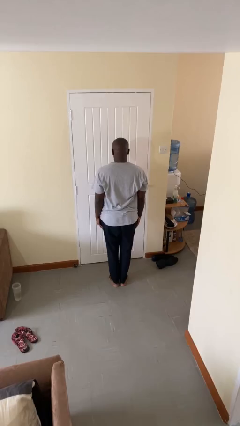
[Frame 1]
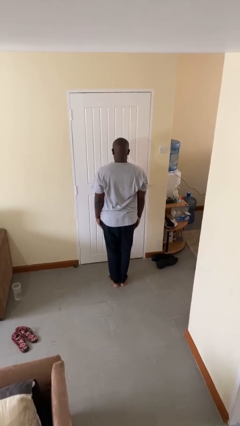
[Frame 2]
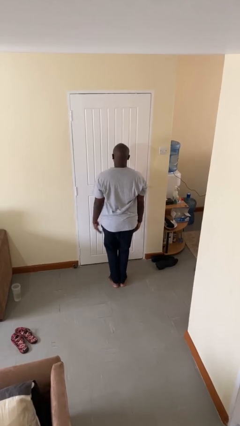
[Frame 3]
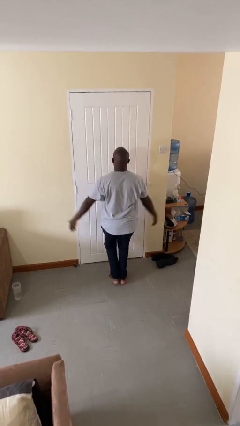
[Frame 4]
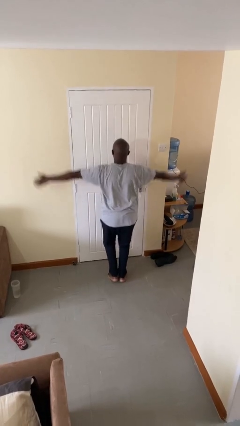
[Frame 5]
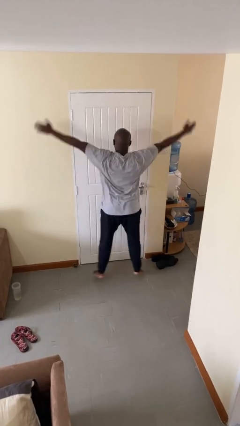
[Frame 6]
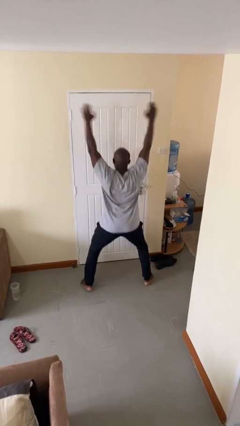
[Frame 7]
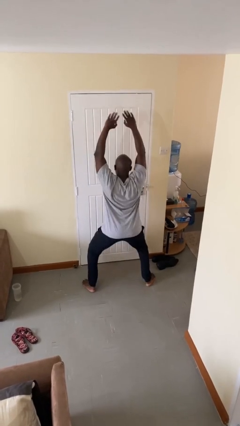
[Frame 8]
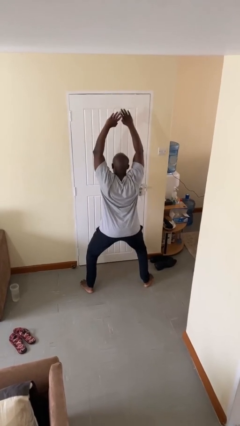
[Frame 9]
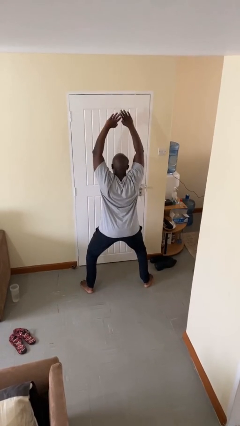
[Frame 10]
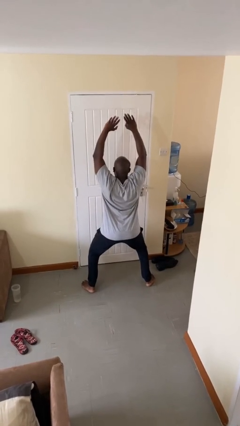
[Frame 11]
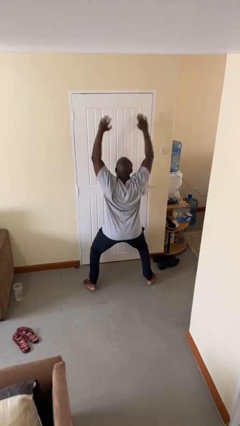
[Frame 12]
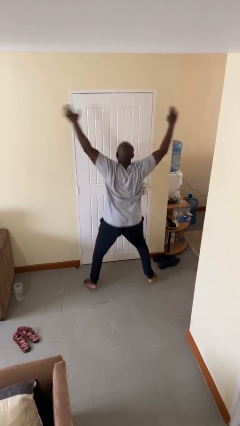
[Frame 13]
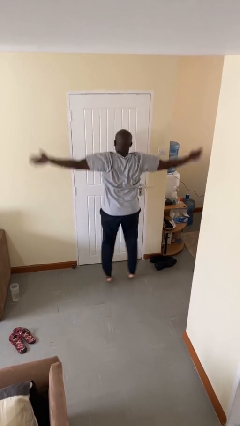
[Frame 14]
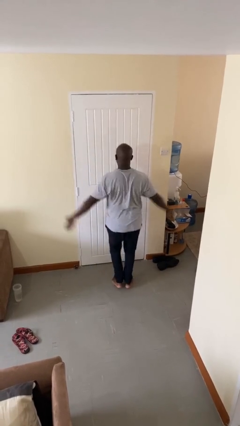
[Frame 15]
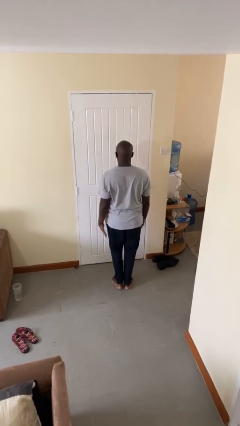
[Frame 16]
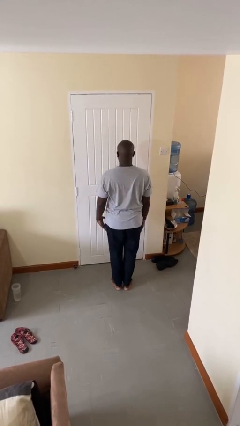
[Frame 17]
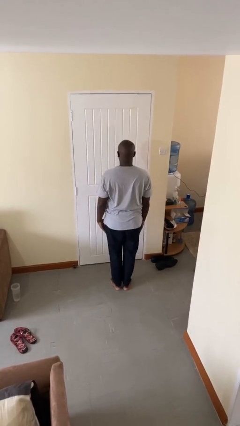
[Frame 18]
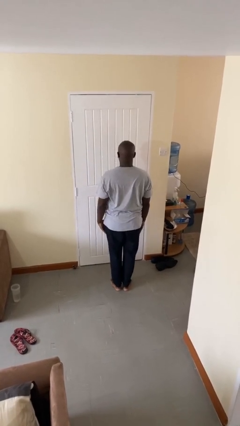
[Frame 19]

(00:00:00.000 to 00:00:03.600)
person exercises with jumping jacks

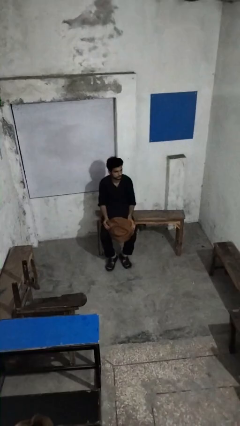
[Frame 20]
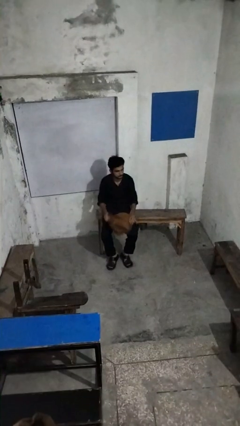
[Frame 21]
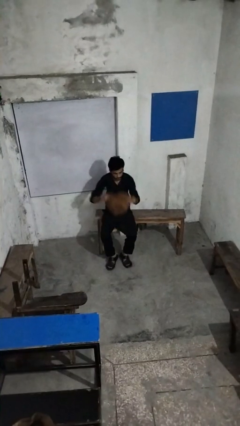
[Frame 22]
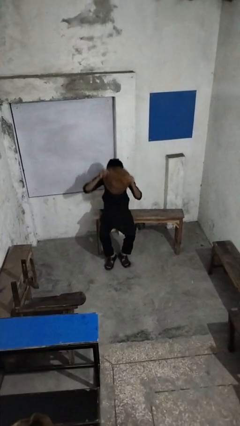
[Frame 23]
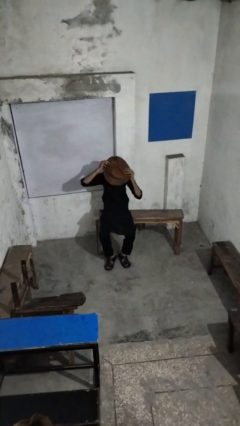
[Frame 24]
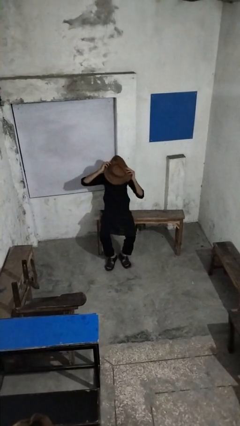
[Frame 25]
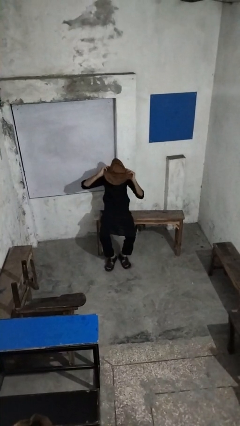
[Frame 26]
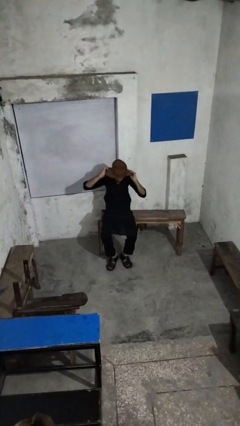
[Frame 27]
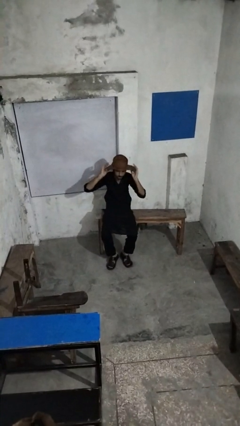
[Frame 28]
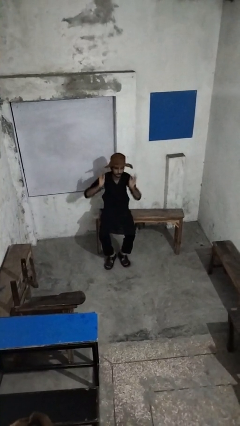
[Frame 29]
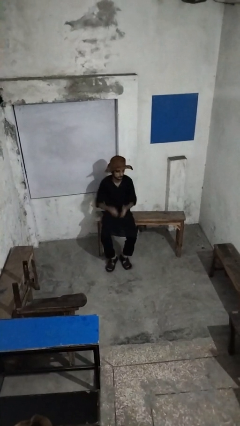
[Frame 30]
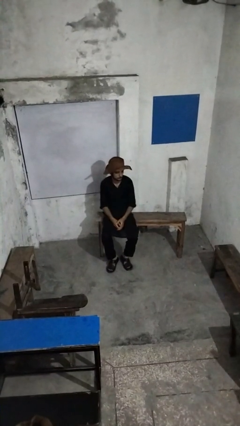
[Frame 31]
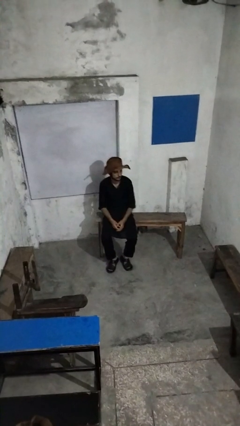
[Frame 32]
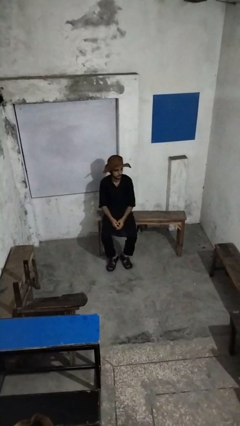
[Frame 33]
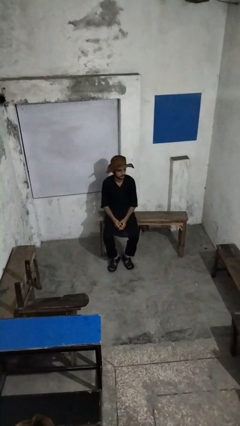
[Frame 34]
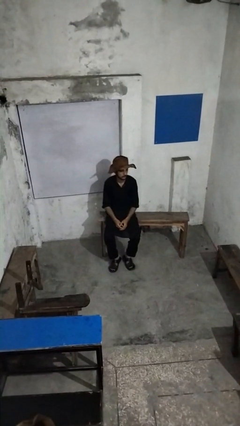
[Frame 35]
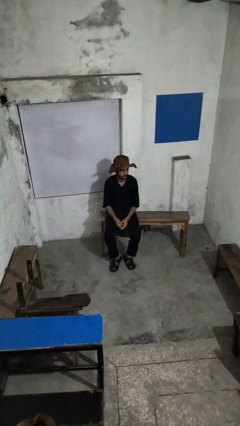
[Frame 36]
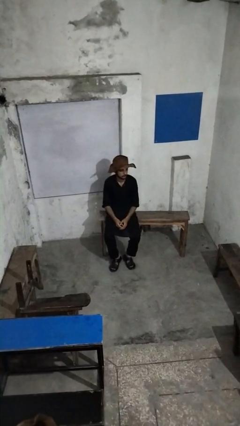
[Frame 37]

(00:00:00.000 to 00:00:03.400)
person puts on hat

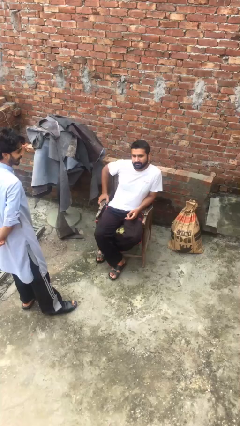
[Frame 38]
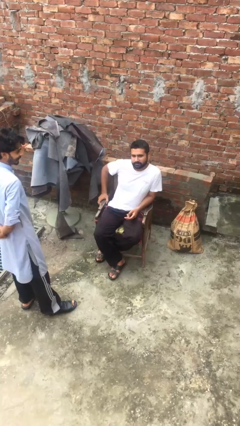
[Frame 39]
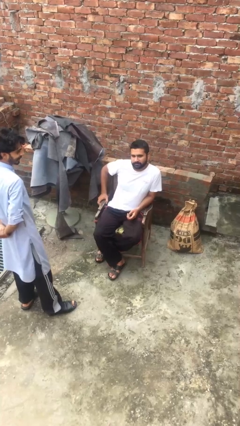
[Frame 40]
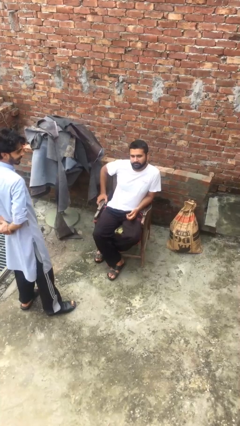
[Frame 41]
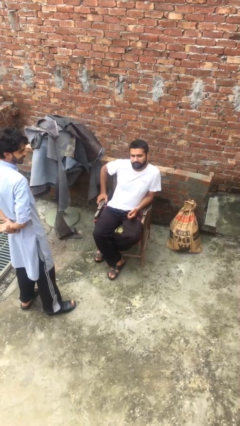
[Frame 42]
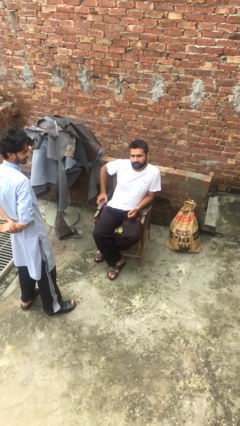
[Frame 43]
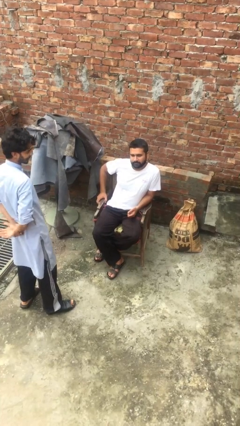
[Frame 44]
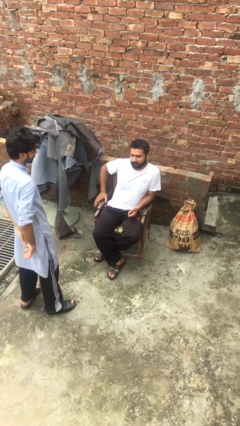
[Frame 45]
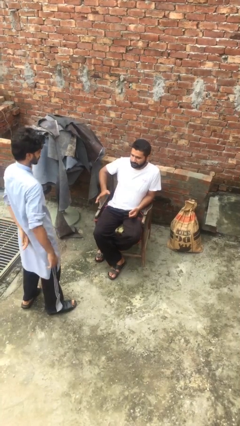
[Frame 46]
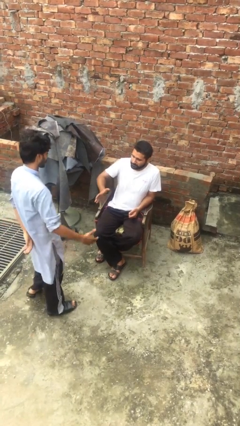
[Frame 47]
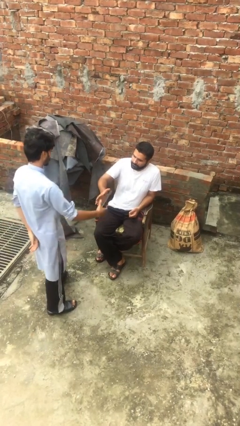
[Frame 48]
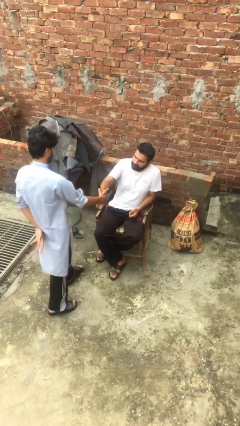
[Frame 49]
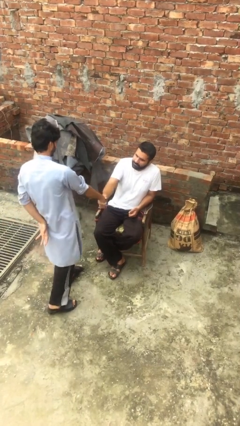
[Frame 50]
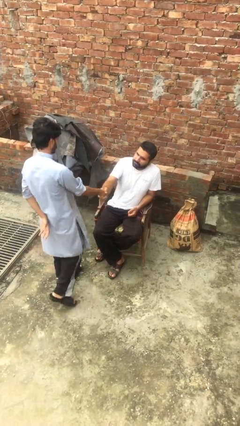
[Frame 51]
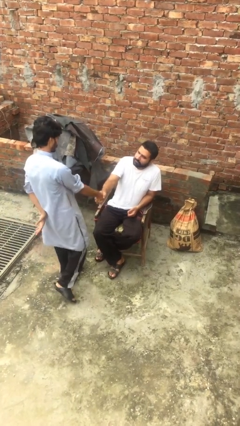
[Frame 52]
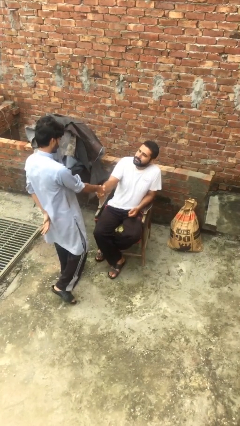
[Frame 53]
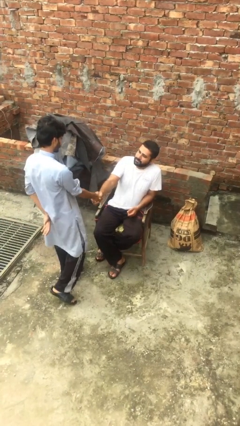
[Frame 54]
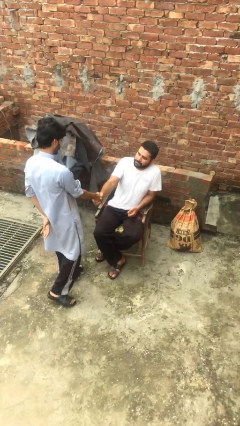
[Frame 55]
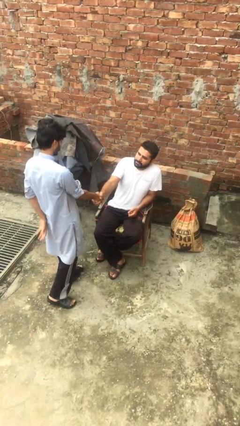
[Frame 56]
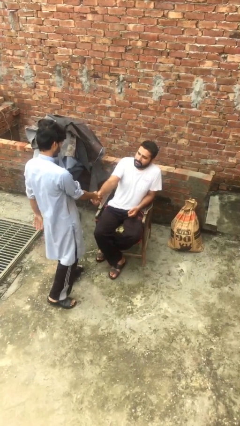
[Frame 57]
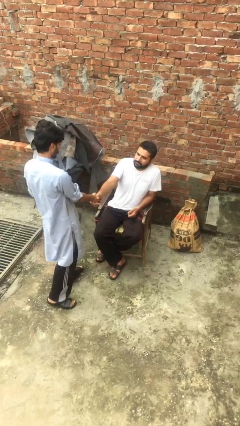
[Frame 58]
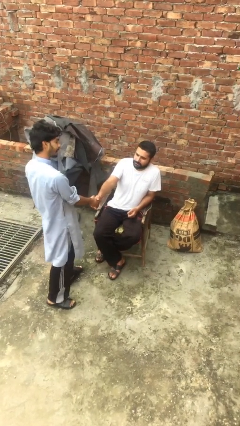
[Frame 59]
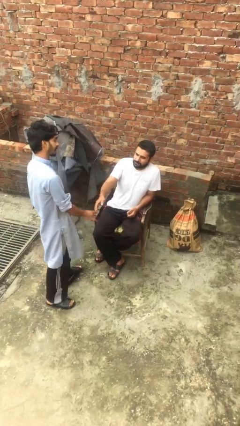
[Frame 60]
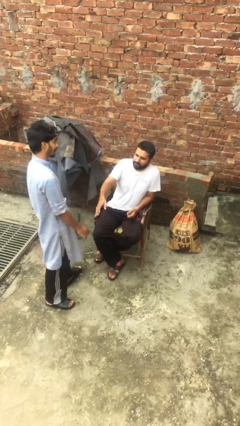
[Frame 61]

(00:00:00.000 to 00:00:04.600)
person shakes hand

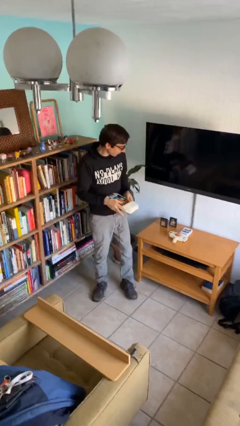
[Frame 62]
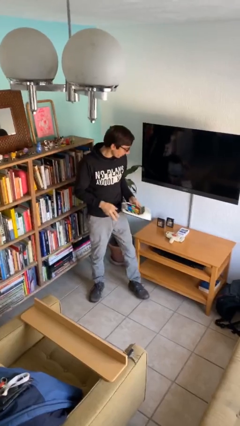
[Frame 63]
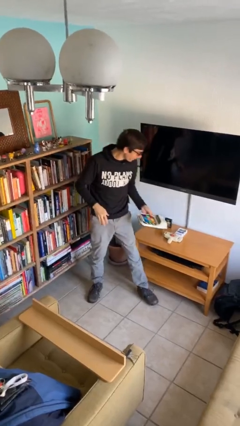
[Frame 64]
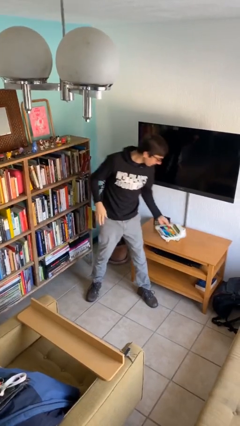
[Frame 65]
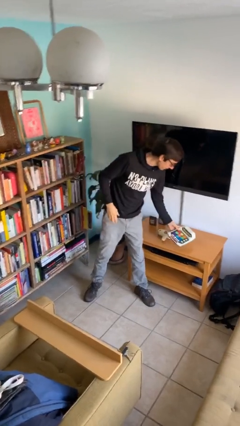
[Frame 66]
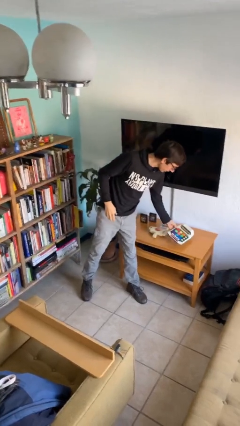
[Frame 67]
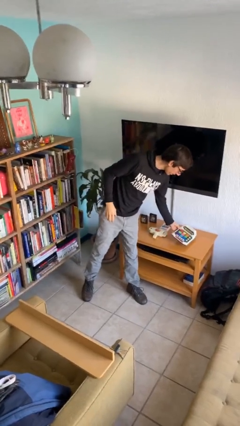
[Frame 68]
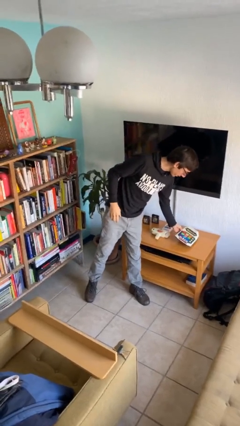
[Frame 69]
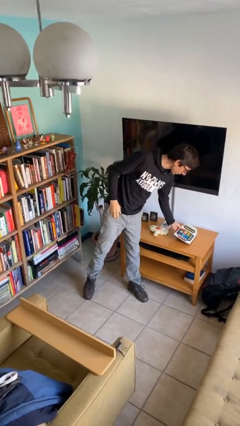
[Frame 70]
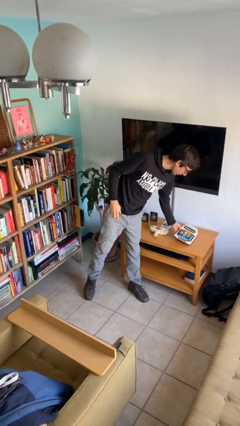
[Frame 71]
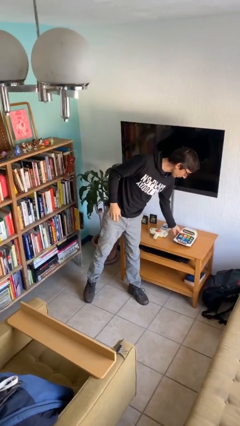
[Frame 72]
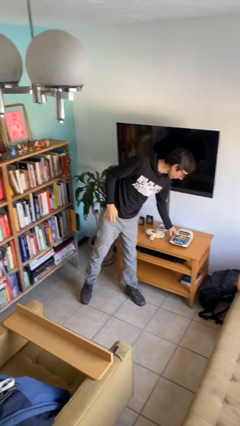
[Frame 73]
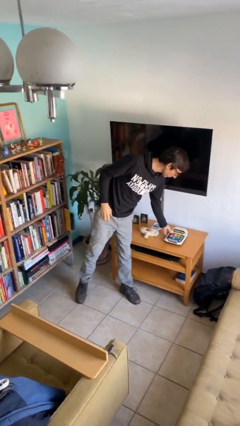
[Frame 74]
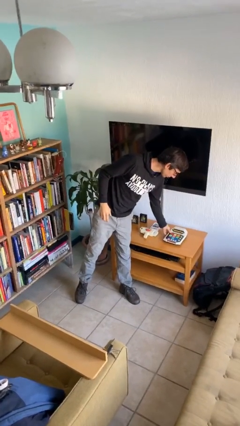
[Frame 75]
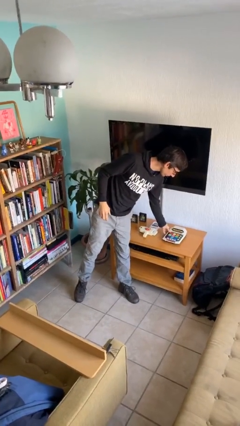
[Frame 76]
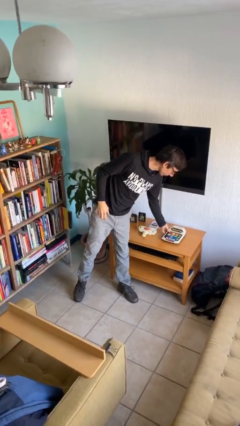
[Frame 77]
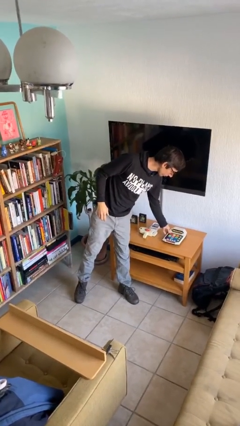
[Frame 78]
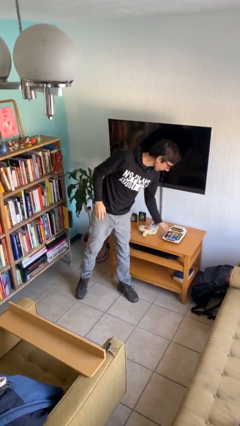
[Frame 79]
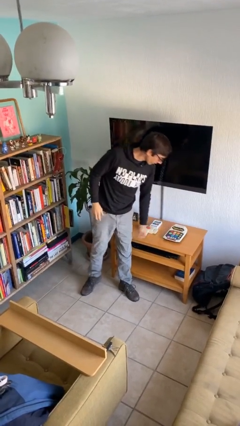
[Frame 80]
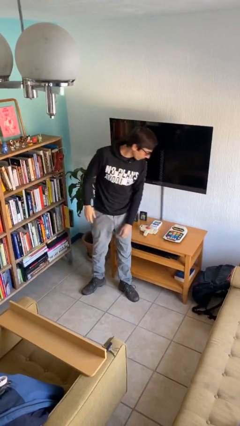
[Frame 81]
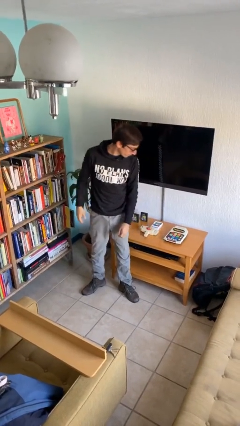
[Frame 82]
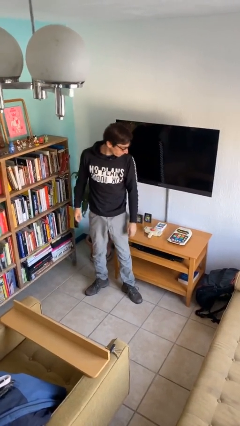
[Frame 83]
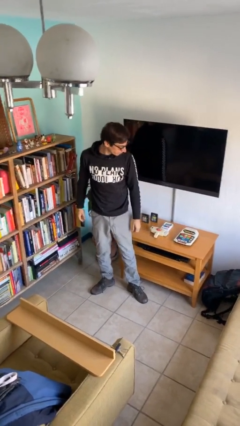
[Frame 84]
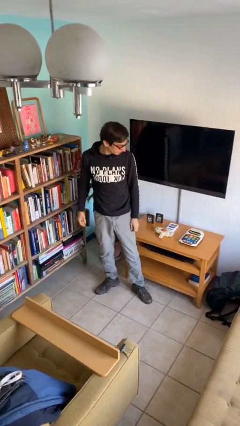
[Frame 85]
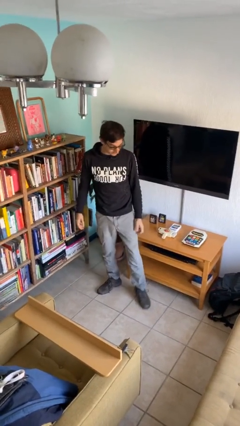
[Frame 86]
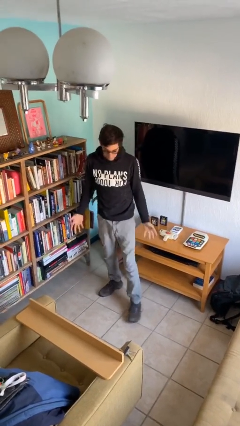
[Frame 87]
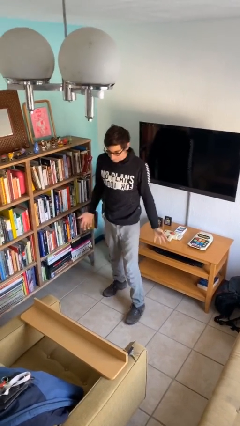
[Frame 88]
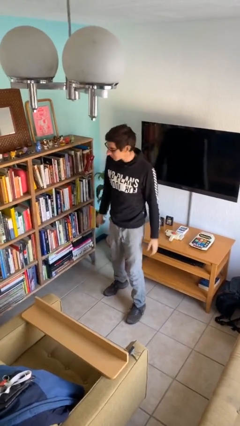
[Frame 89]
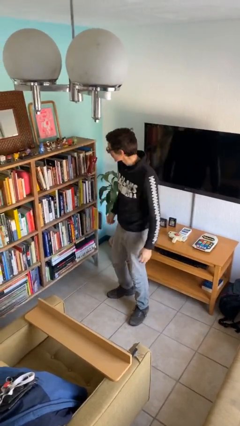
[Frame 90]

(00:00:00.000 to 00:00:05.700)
person puts down object on table

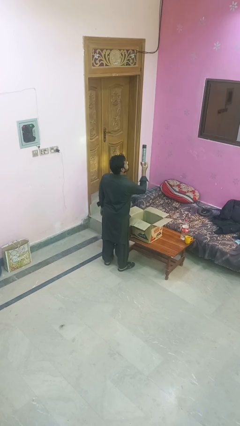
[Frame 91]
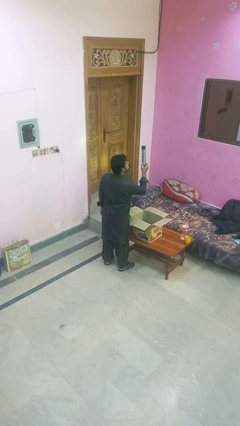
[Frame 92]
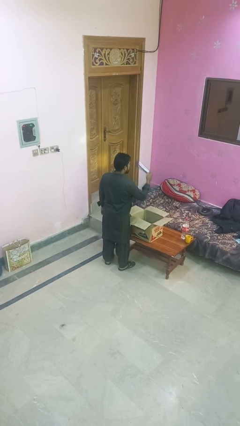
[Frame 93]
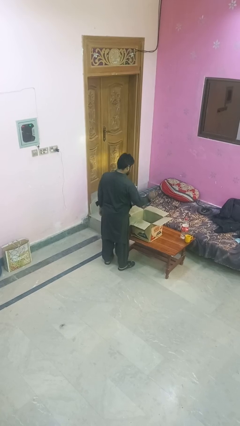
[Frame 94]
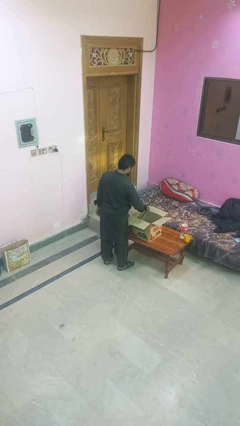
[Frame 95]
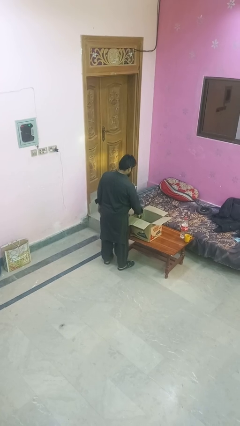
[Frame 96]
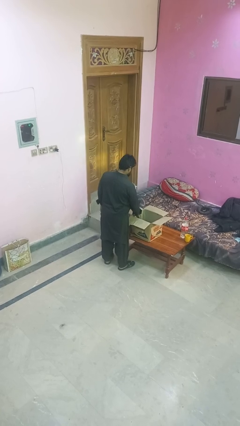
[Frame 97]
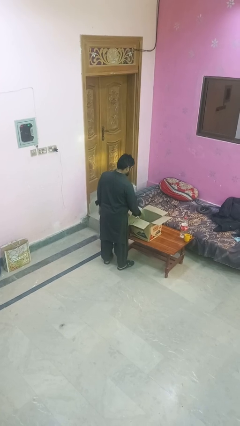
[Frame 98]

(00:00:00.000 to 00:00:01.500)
person puts object into box
